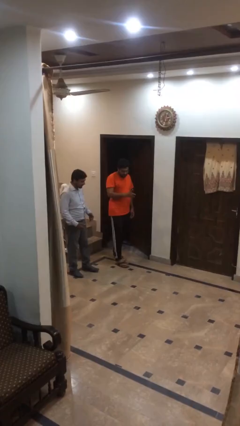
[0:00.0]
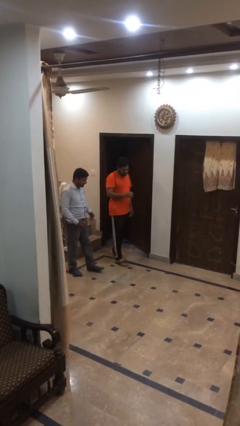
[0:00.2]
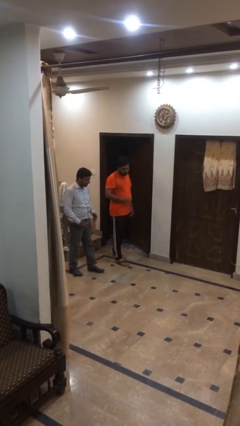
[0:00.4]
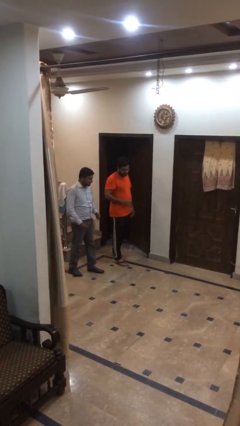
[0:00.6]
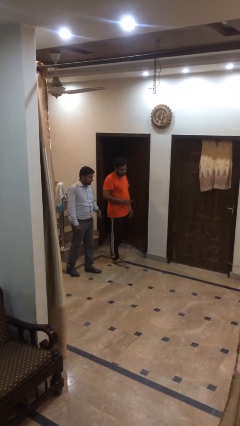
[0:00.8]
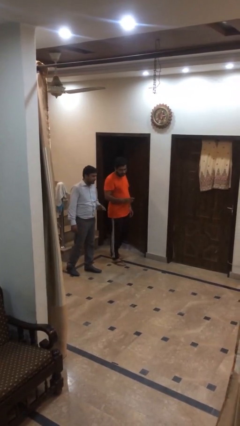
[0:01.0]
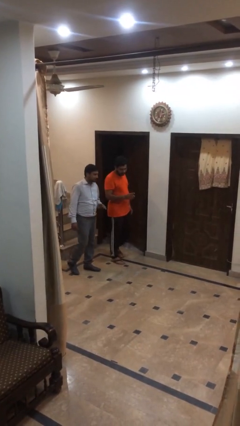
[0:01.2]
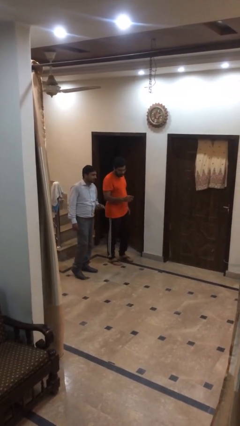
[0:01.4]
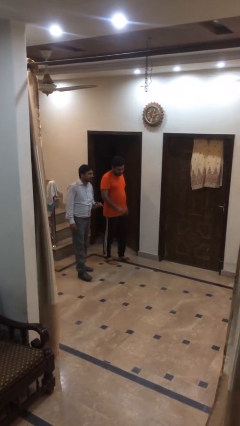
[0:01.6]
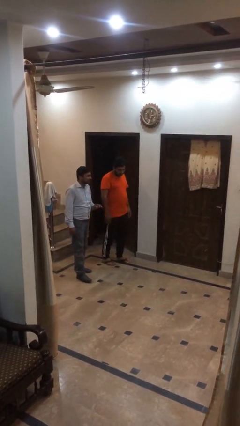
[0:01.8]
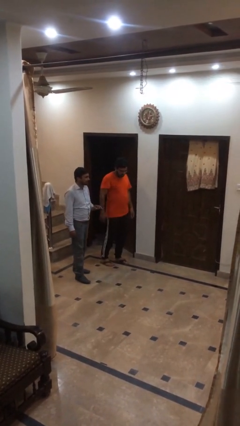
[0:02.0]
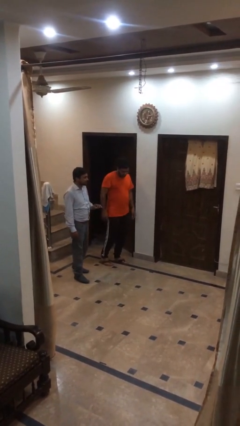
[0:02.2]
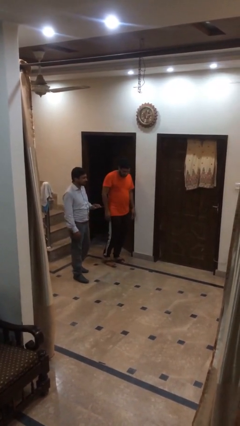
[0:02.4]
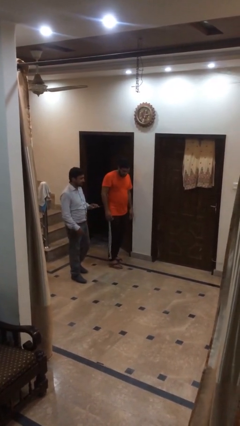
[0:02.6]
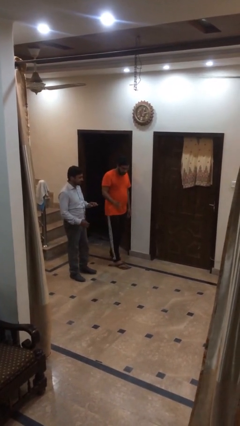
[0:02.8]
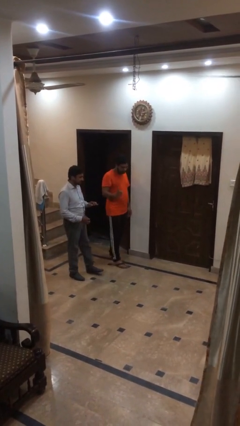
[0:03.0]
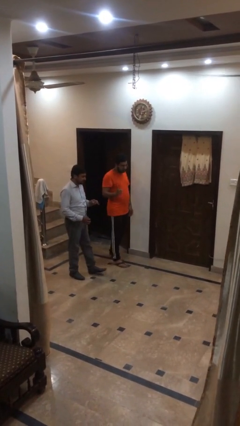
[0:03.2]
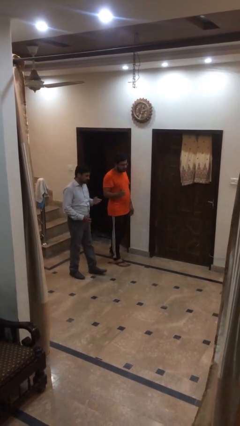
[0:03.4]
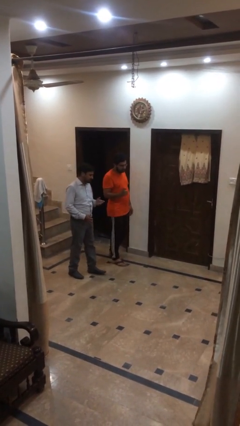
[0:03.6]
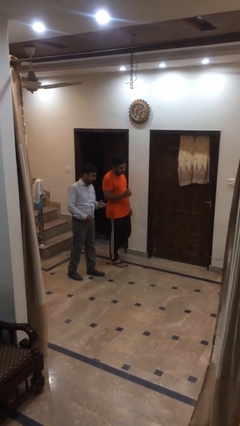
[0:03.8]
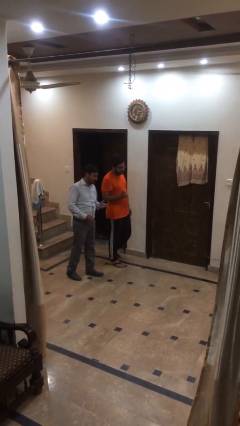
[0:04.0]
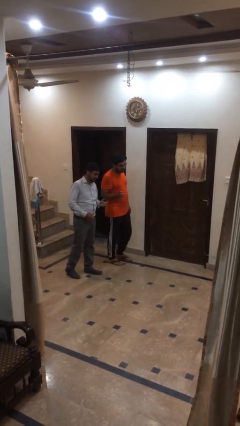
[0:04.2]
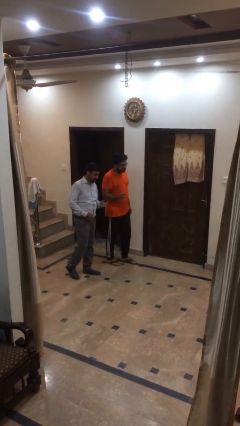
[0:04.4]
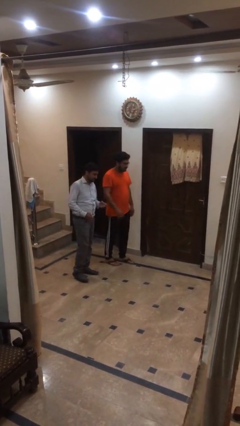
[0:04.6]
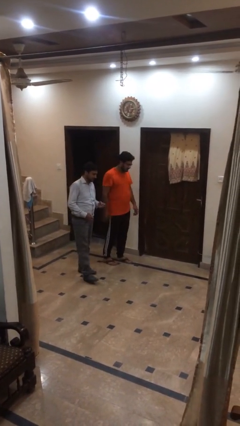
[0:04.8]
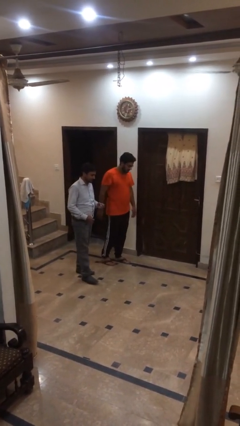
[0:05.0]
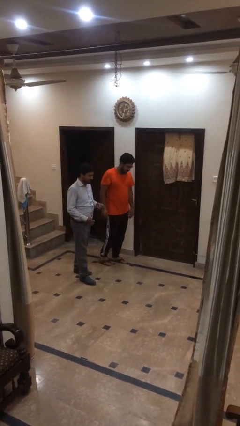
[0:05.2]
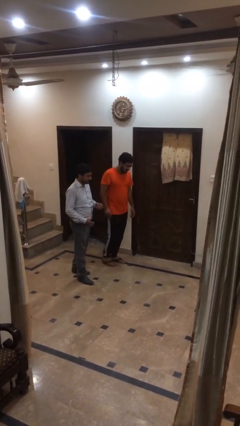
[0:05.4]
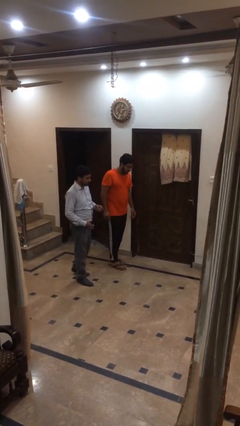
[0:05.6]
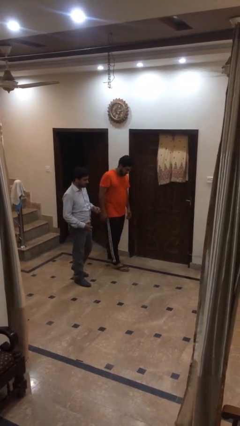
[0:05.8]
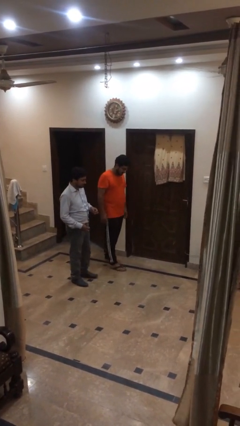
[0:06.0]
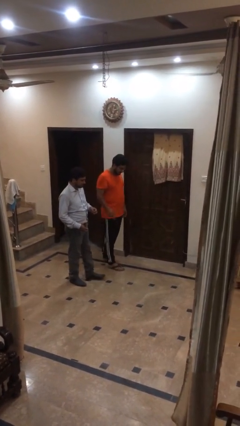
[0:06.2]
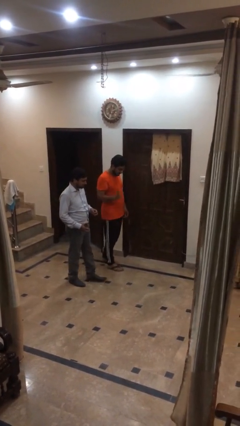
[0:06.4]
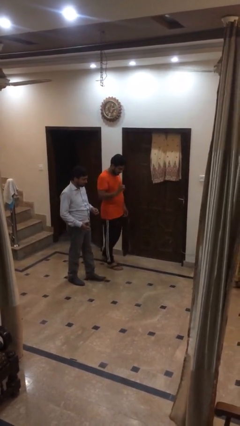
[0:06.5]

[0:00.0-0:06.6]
person talks to person

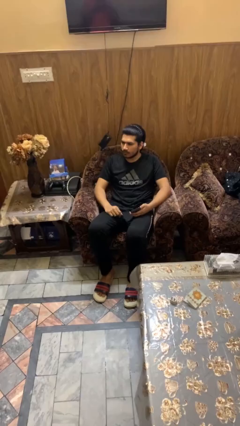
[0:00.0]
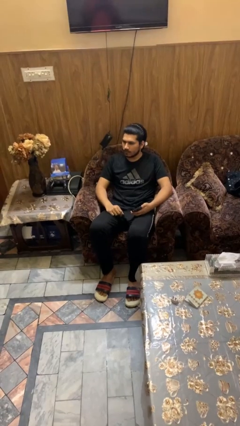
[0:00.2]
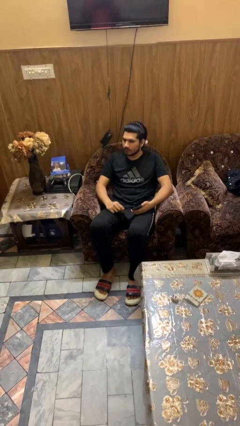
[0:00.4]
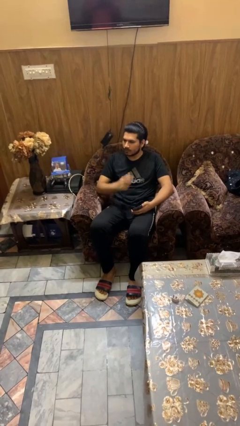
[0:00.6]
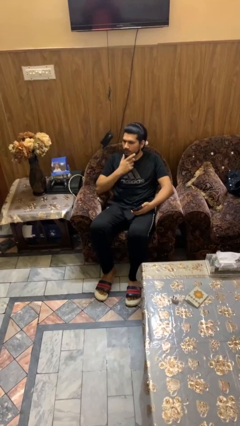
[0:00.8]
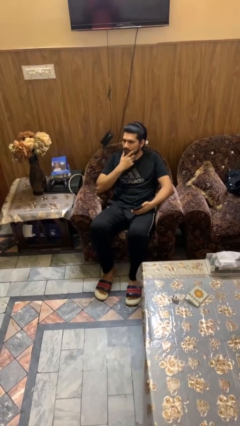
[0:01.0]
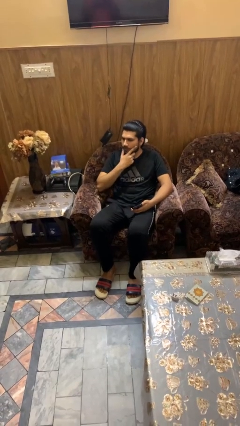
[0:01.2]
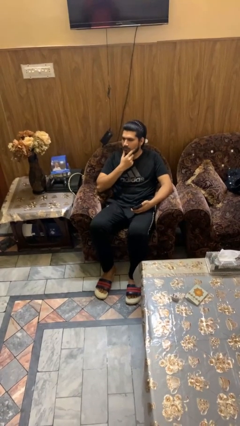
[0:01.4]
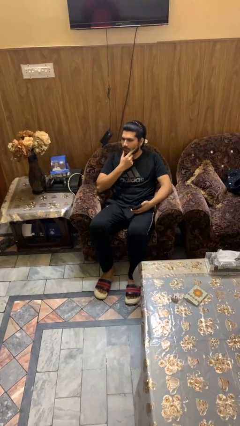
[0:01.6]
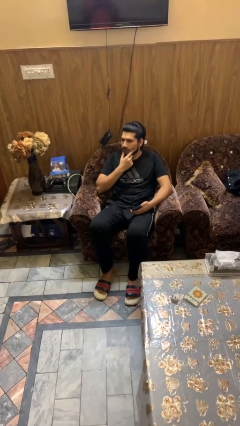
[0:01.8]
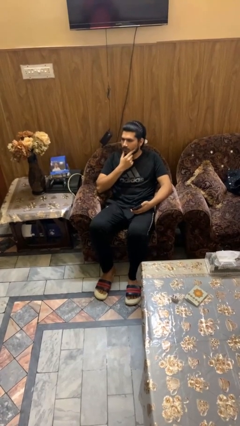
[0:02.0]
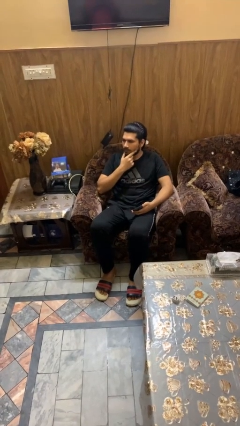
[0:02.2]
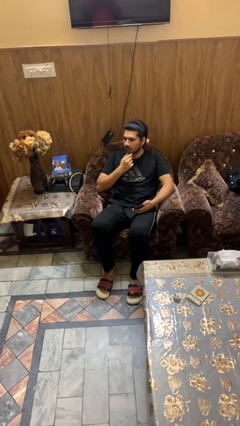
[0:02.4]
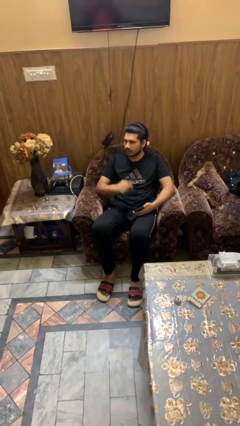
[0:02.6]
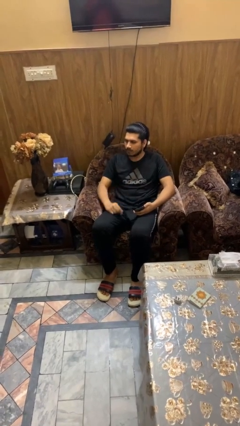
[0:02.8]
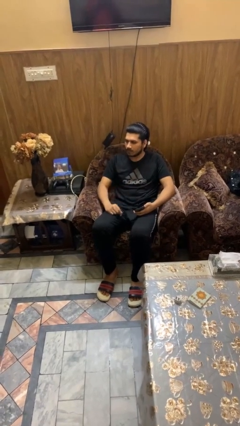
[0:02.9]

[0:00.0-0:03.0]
person strokes chin

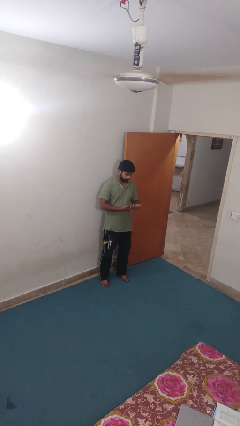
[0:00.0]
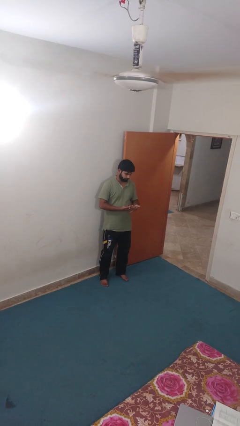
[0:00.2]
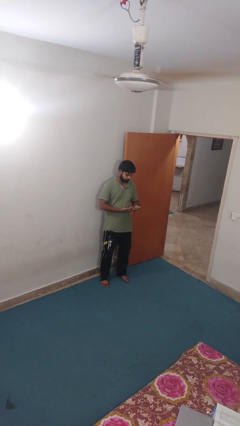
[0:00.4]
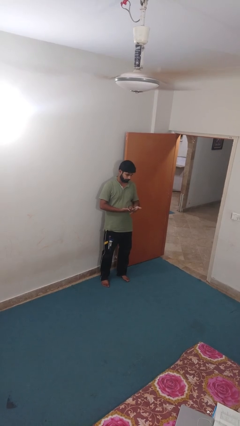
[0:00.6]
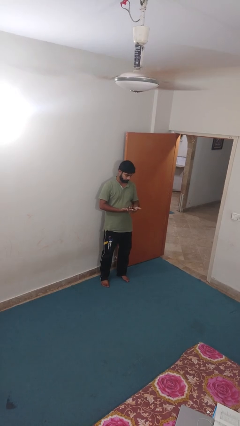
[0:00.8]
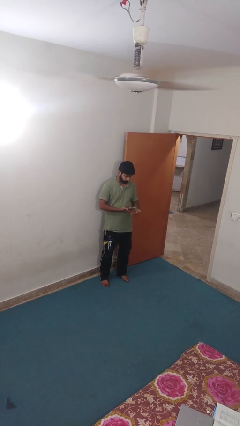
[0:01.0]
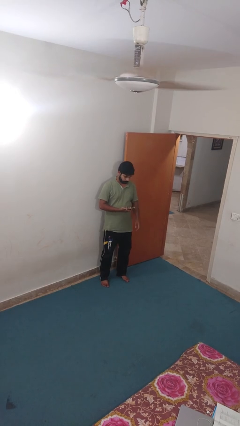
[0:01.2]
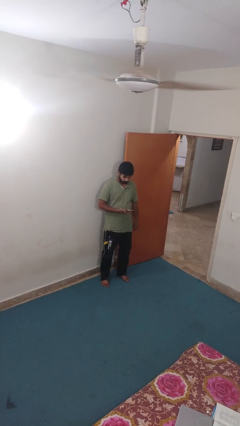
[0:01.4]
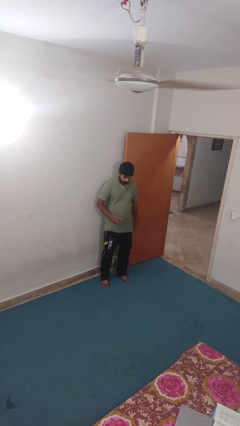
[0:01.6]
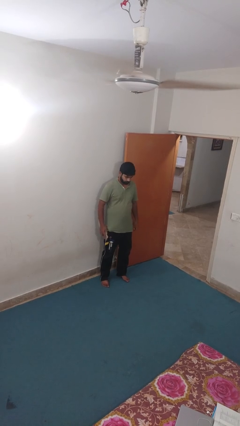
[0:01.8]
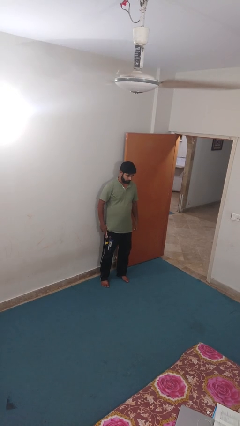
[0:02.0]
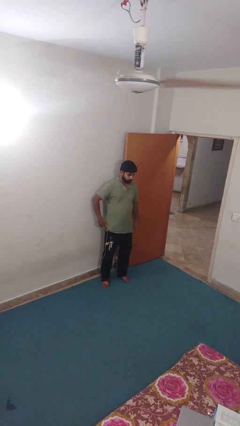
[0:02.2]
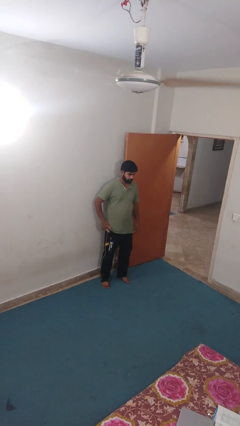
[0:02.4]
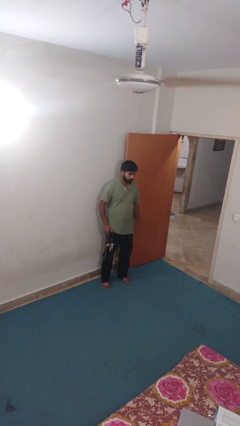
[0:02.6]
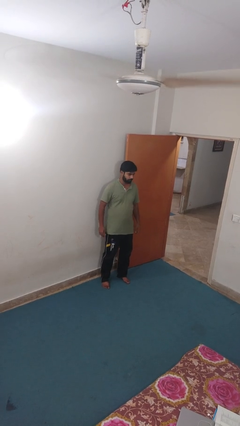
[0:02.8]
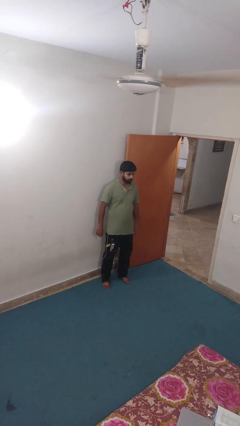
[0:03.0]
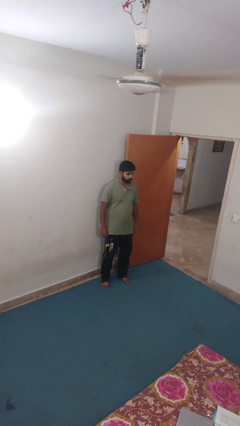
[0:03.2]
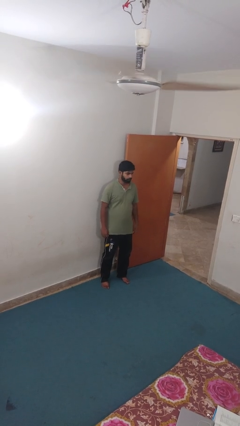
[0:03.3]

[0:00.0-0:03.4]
person puts phone into pocket

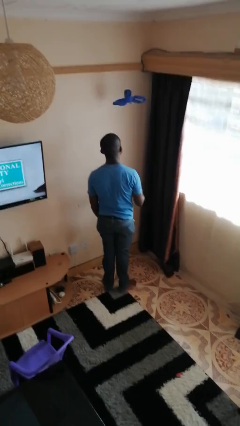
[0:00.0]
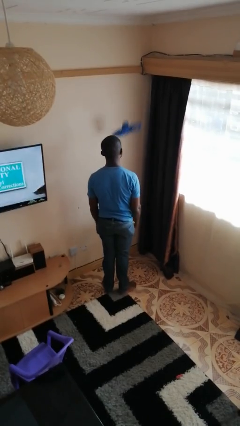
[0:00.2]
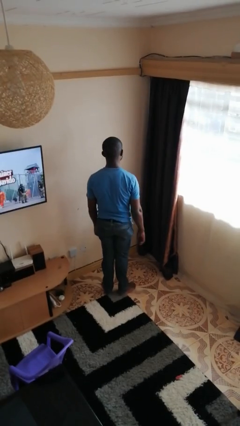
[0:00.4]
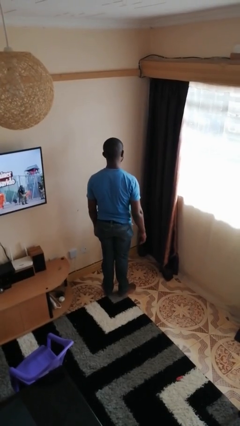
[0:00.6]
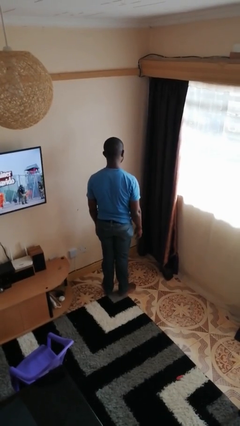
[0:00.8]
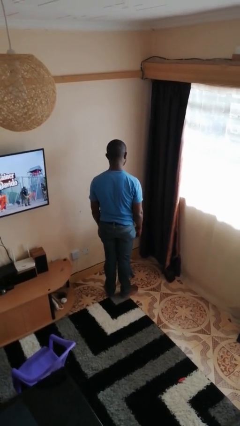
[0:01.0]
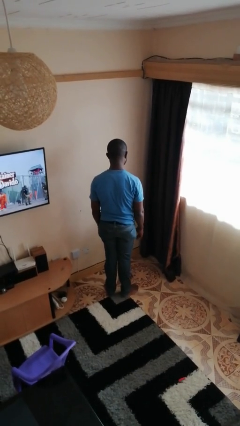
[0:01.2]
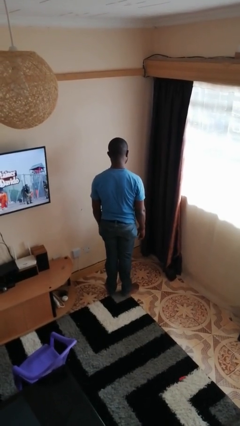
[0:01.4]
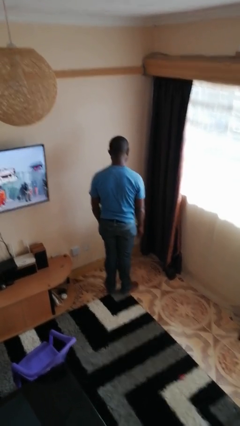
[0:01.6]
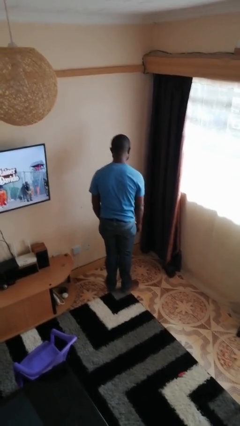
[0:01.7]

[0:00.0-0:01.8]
person throws object into air

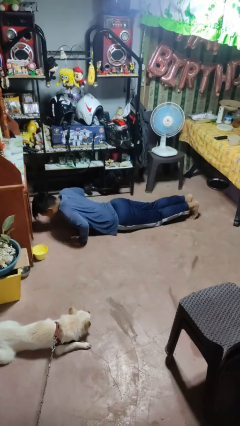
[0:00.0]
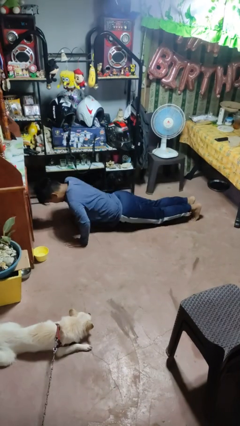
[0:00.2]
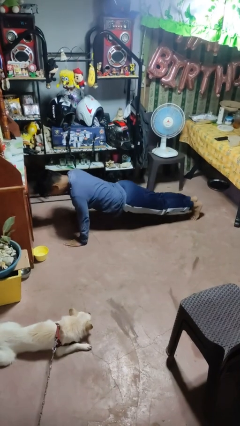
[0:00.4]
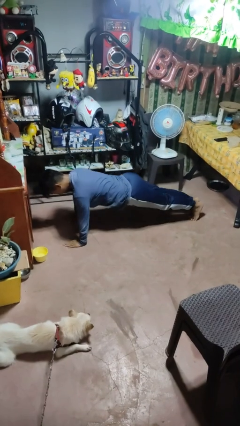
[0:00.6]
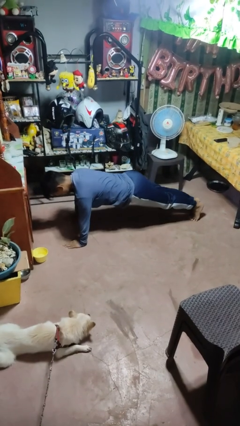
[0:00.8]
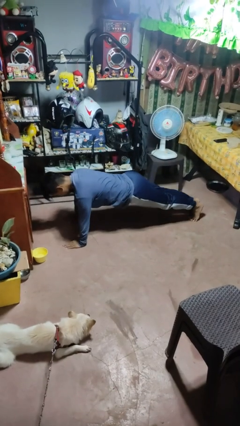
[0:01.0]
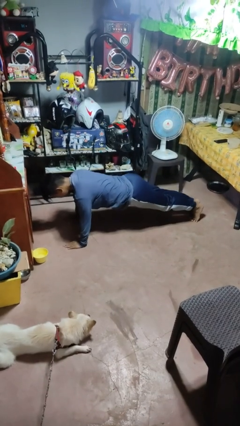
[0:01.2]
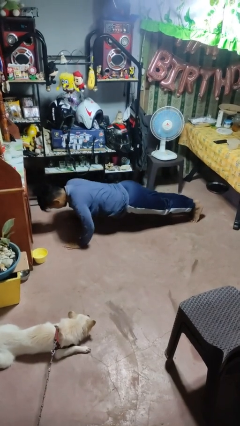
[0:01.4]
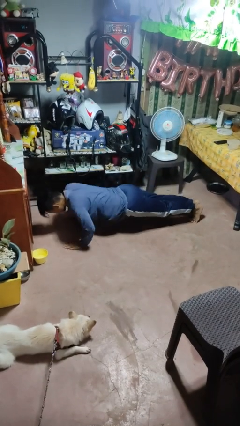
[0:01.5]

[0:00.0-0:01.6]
person exercises with pushup

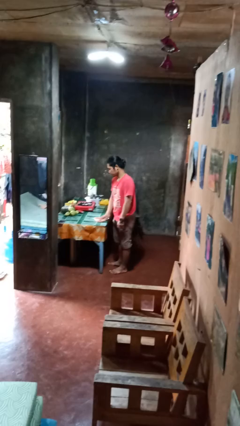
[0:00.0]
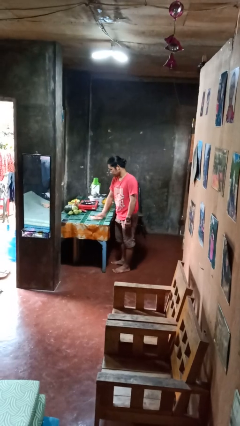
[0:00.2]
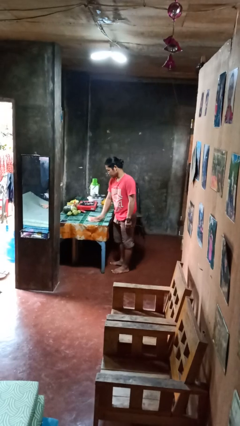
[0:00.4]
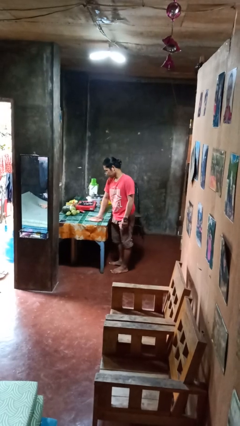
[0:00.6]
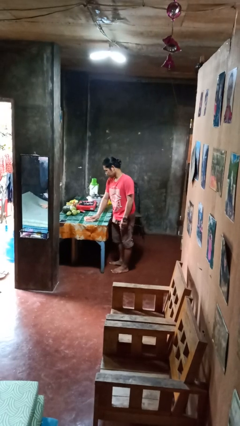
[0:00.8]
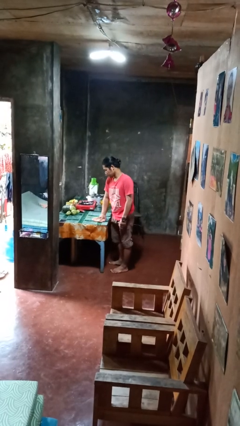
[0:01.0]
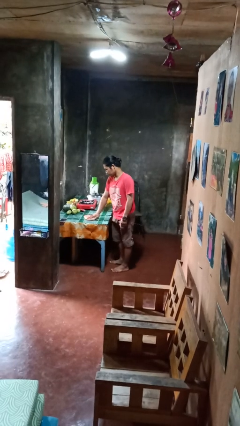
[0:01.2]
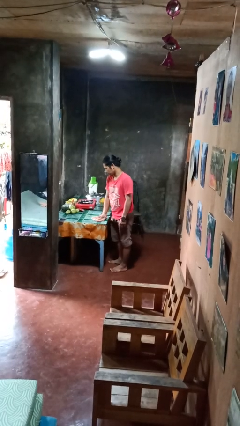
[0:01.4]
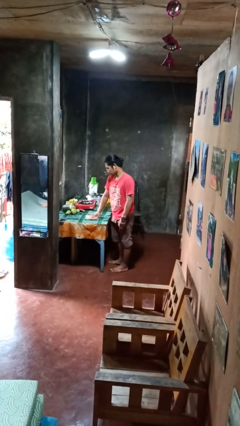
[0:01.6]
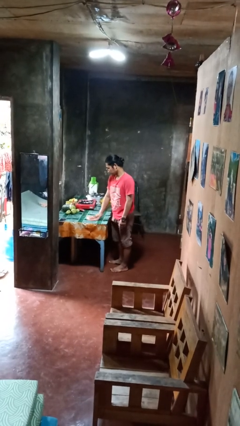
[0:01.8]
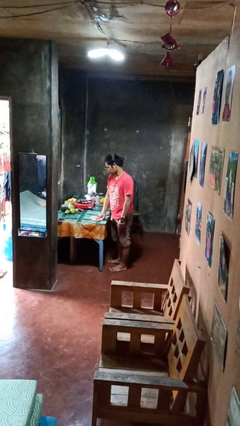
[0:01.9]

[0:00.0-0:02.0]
person cleans table with rag
